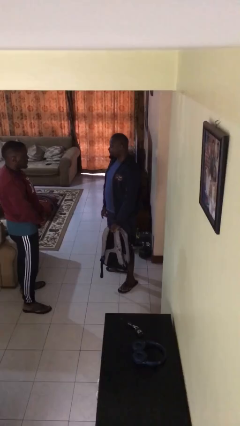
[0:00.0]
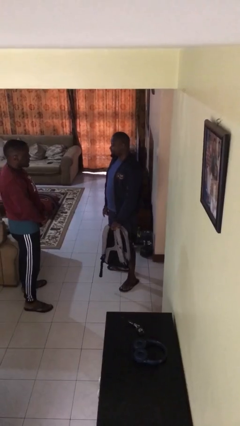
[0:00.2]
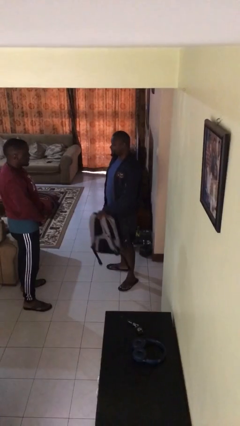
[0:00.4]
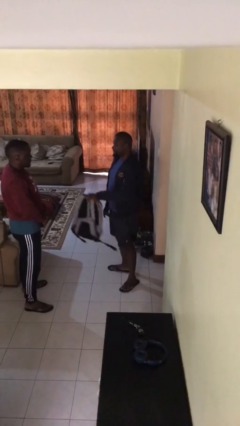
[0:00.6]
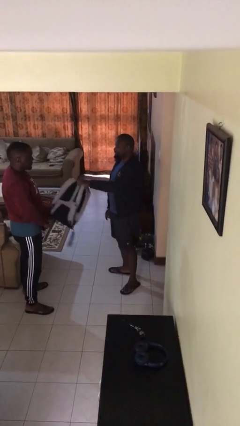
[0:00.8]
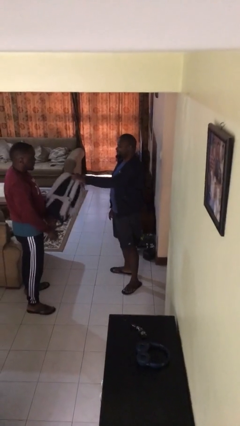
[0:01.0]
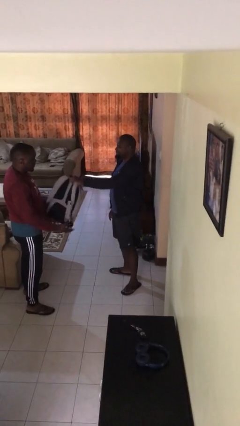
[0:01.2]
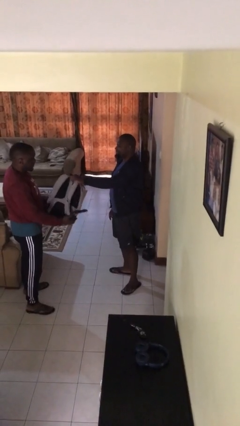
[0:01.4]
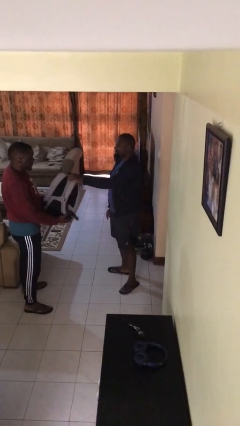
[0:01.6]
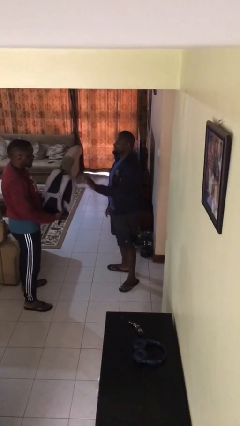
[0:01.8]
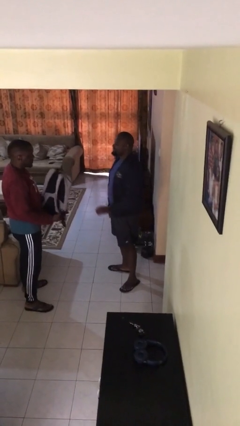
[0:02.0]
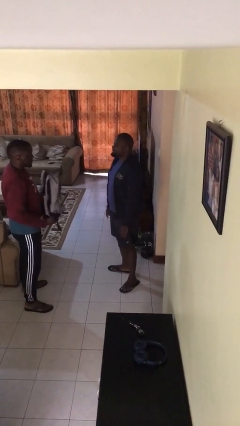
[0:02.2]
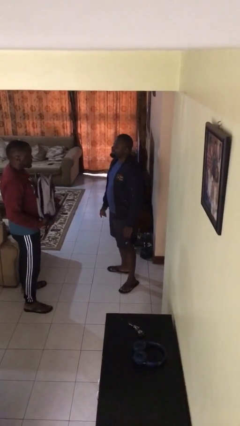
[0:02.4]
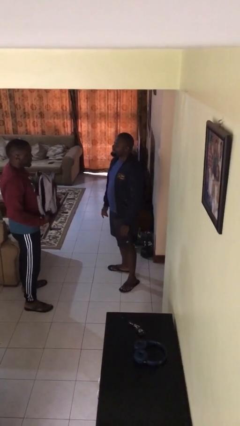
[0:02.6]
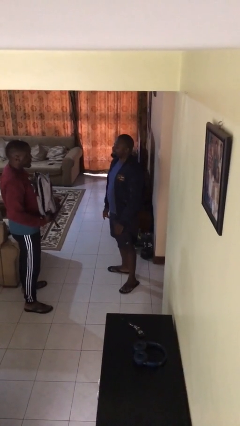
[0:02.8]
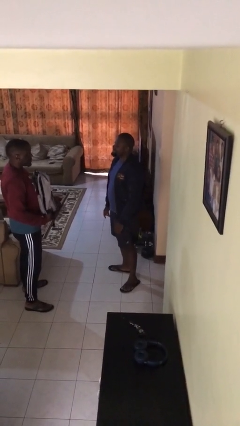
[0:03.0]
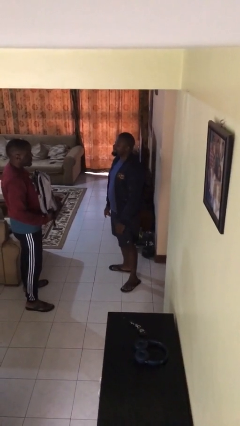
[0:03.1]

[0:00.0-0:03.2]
person transfers object to person

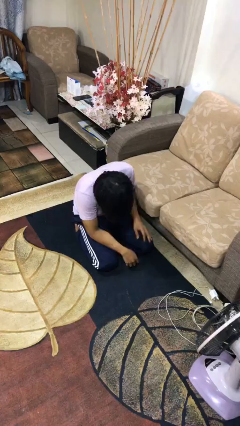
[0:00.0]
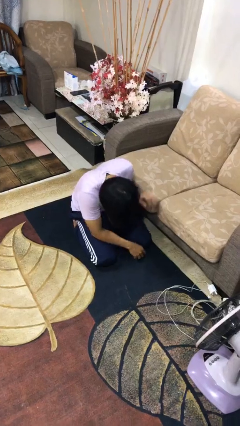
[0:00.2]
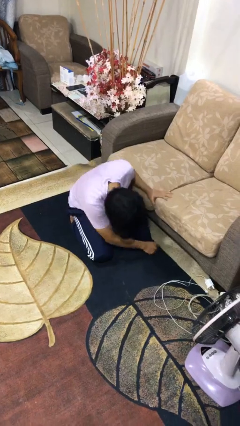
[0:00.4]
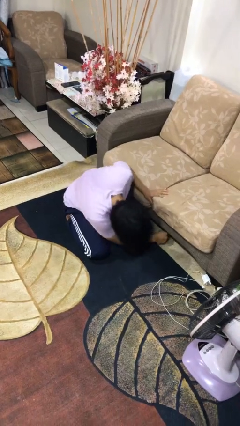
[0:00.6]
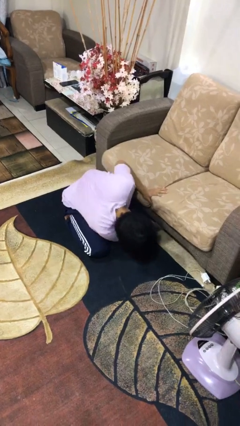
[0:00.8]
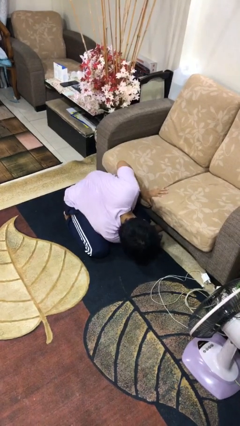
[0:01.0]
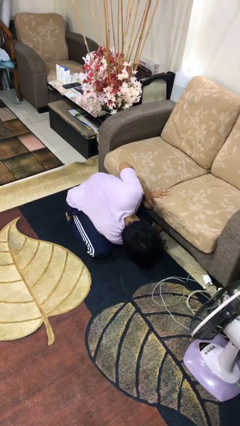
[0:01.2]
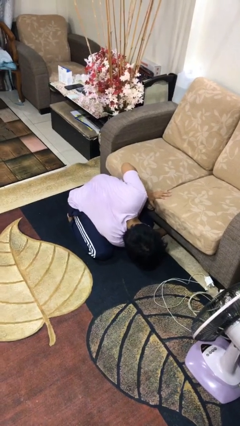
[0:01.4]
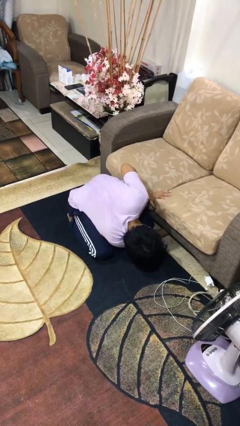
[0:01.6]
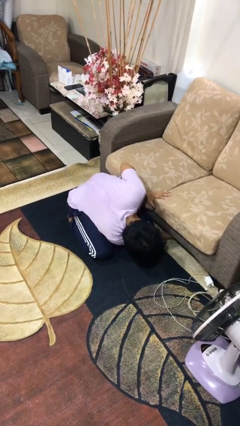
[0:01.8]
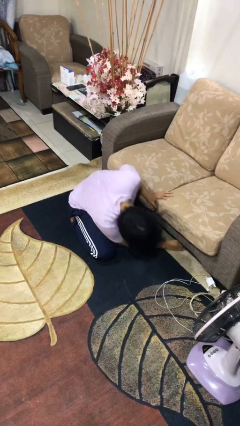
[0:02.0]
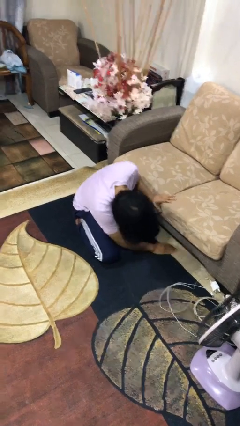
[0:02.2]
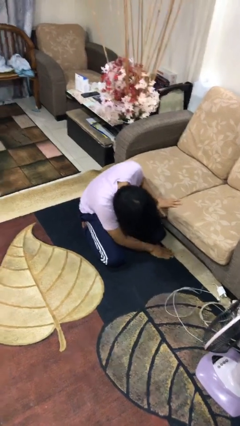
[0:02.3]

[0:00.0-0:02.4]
person searches under couch

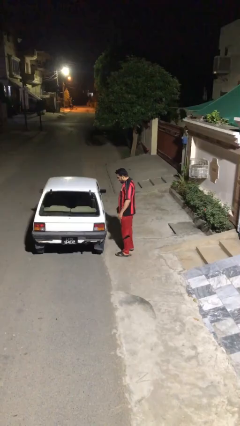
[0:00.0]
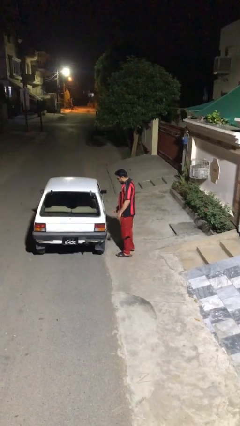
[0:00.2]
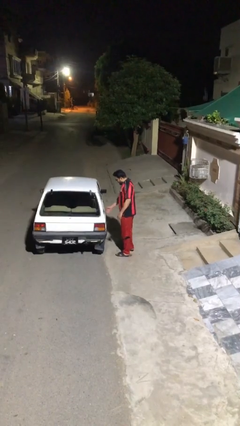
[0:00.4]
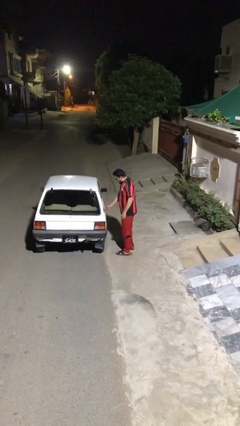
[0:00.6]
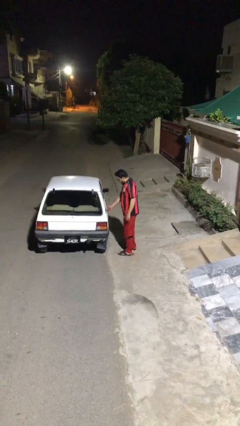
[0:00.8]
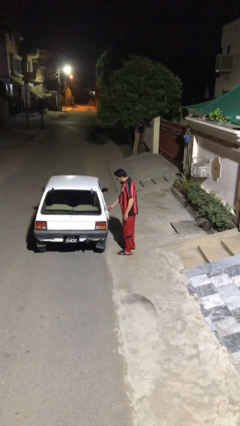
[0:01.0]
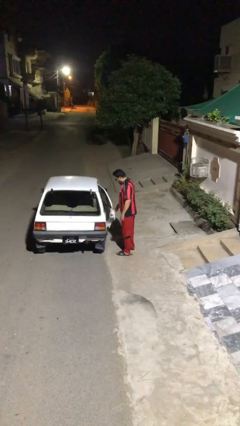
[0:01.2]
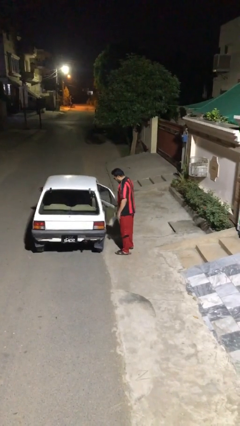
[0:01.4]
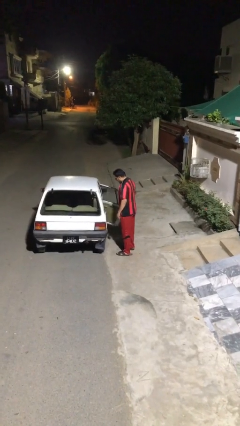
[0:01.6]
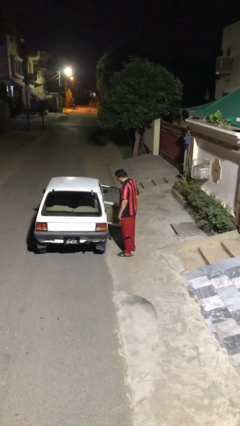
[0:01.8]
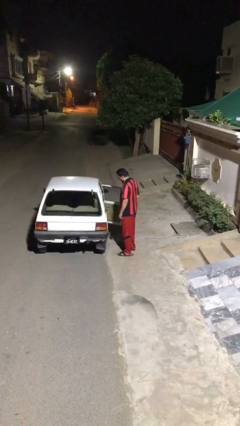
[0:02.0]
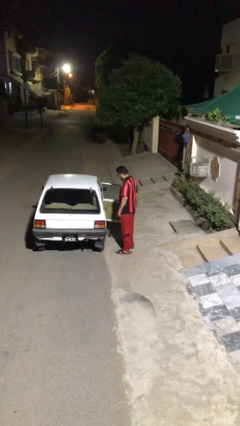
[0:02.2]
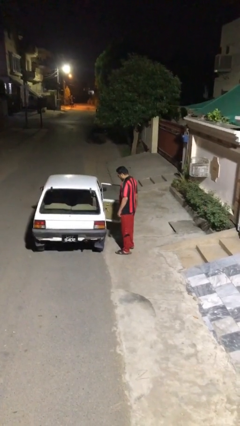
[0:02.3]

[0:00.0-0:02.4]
person opens car door

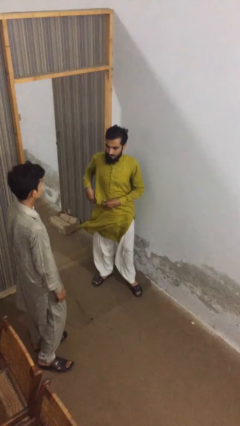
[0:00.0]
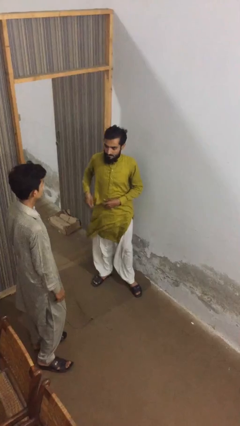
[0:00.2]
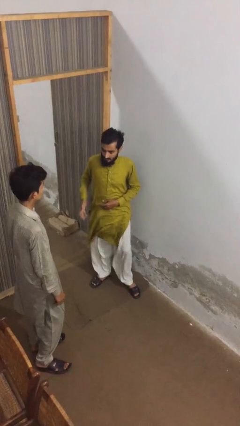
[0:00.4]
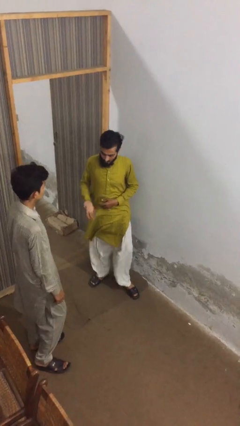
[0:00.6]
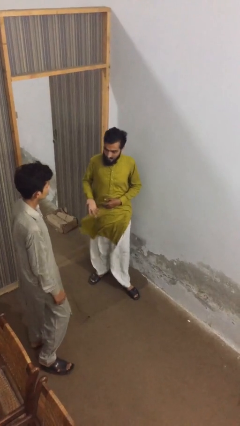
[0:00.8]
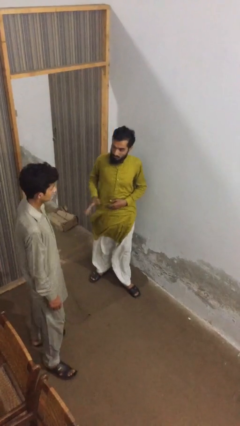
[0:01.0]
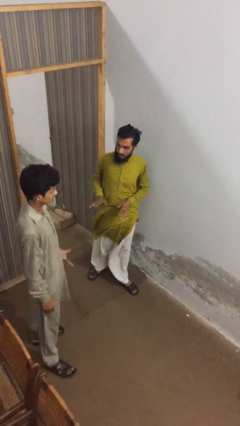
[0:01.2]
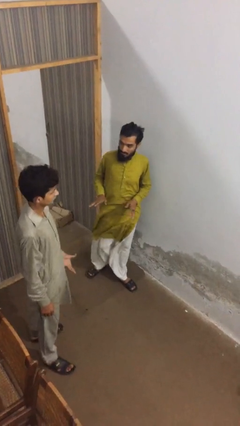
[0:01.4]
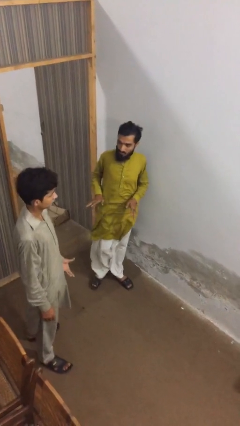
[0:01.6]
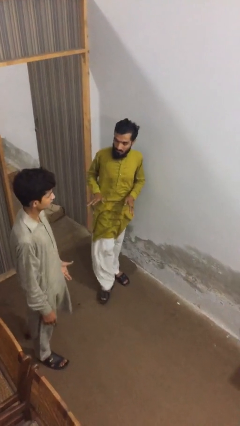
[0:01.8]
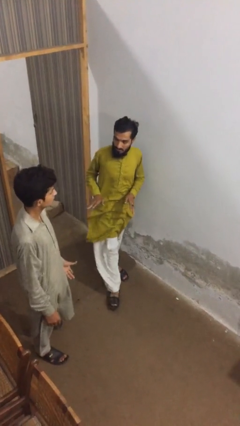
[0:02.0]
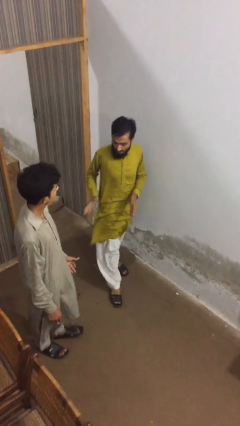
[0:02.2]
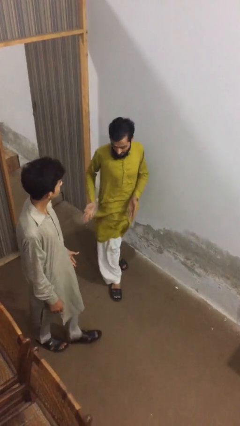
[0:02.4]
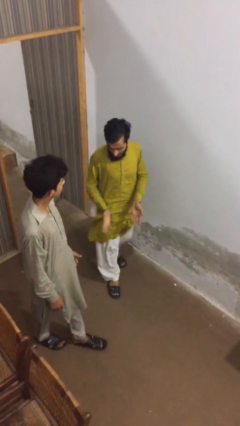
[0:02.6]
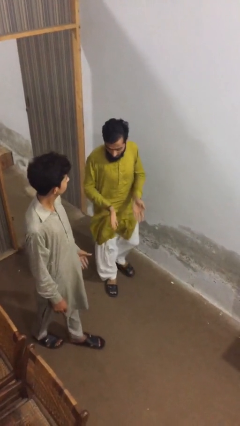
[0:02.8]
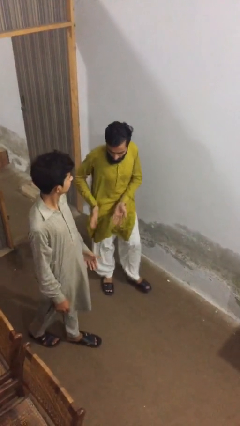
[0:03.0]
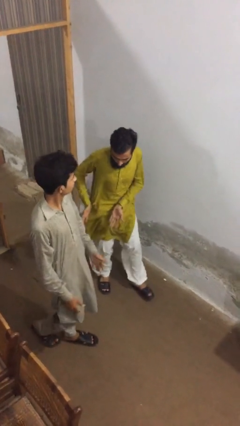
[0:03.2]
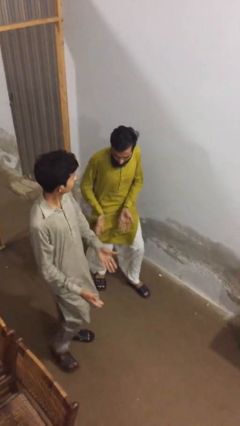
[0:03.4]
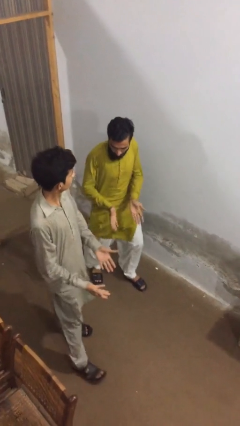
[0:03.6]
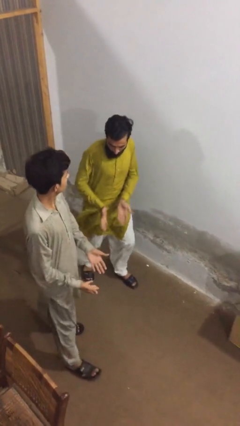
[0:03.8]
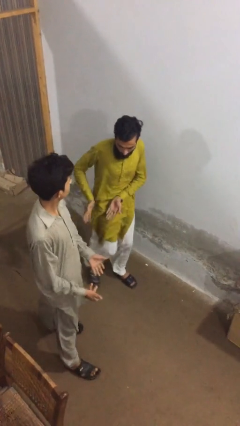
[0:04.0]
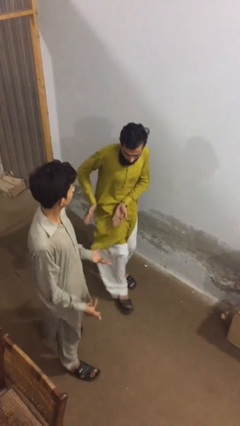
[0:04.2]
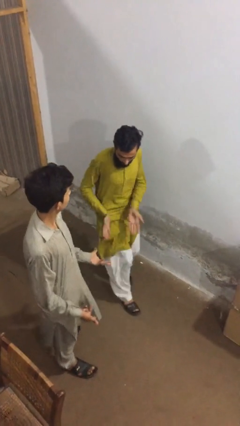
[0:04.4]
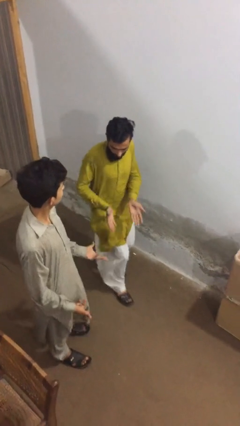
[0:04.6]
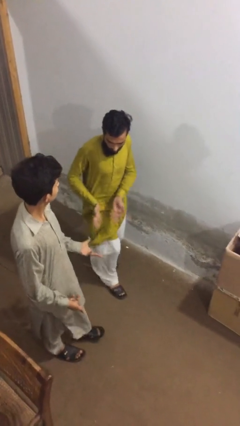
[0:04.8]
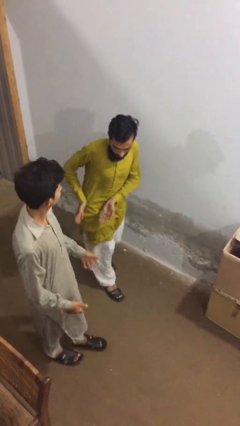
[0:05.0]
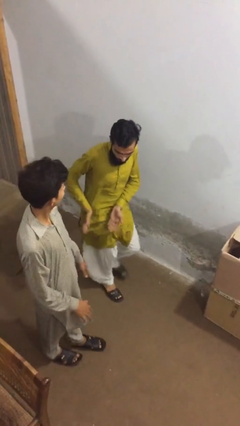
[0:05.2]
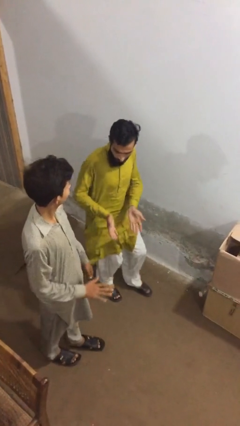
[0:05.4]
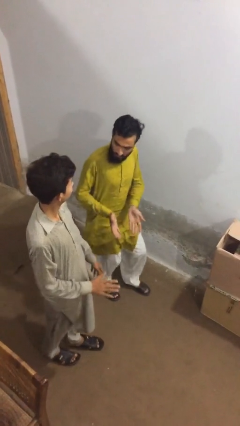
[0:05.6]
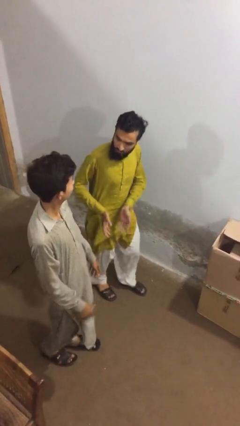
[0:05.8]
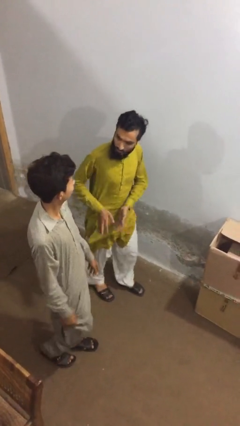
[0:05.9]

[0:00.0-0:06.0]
person talks to person

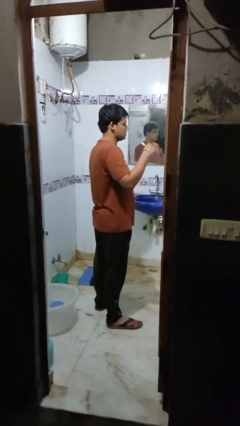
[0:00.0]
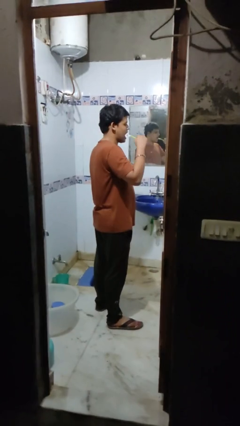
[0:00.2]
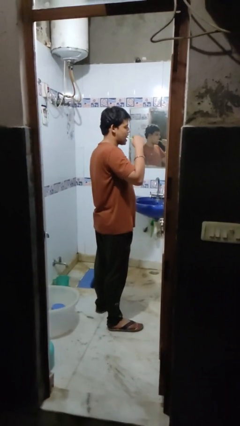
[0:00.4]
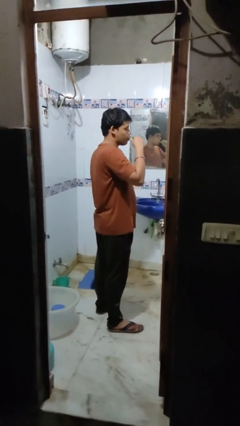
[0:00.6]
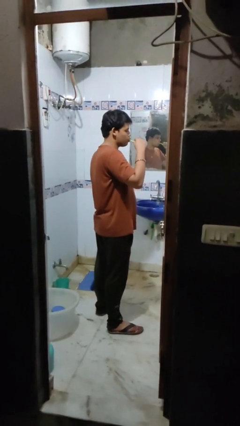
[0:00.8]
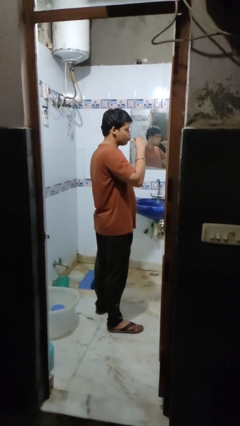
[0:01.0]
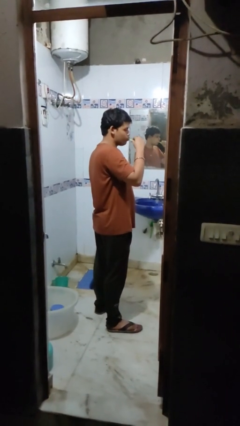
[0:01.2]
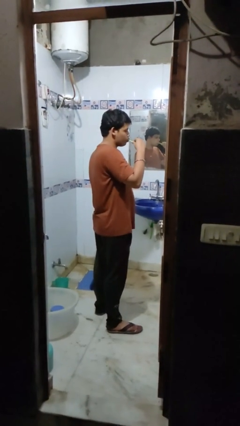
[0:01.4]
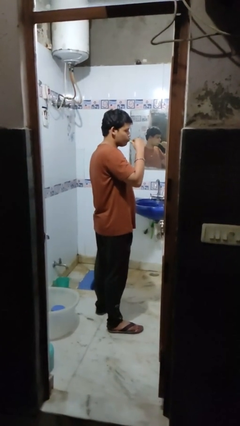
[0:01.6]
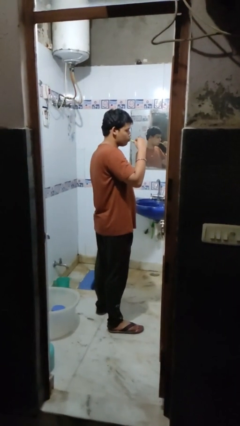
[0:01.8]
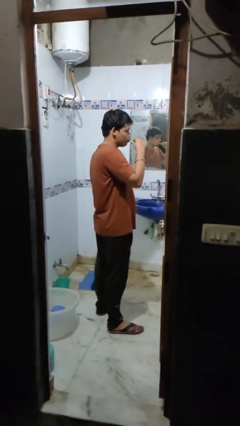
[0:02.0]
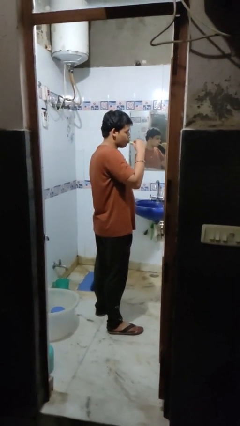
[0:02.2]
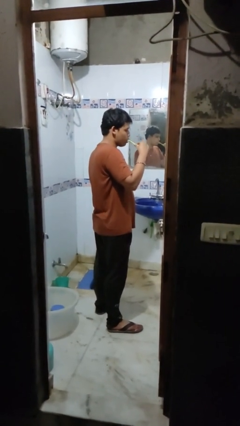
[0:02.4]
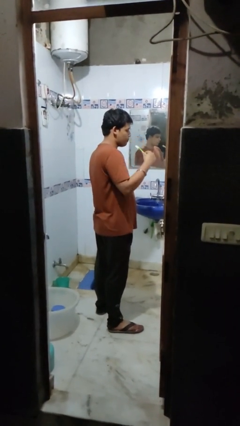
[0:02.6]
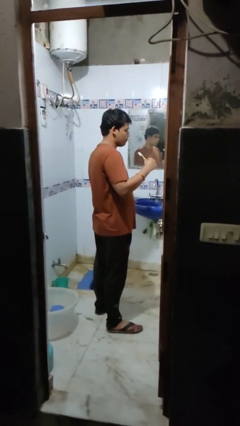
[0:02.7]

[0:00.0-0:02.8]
person brushes teeth

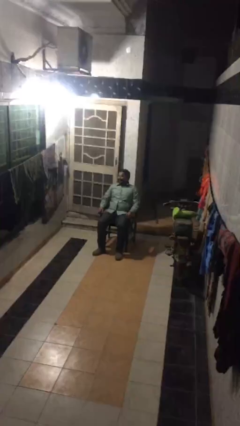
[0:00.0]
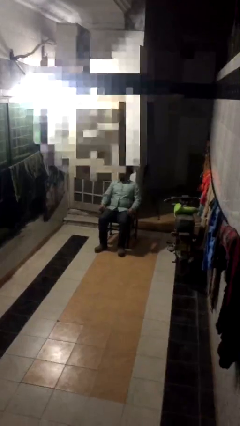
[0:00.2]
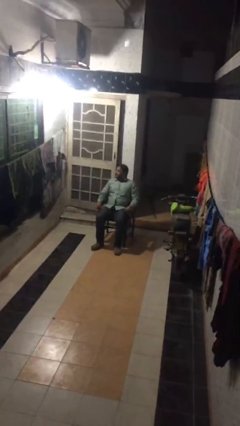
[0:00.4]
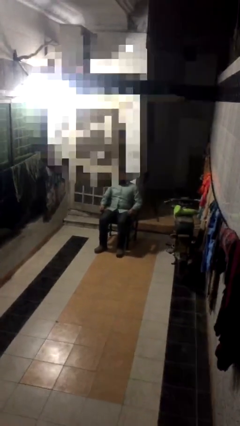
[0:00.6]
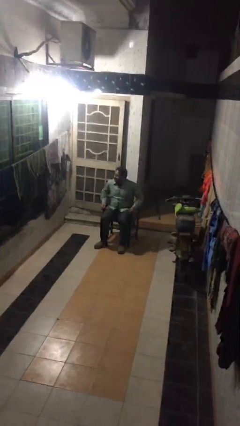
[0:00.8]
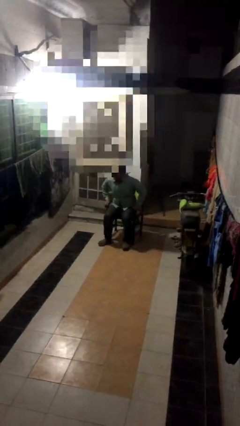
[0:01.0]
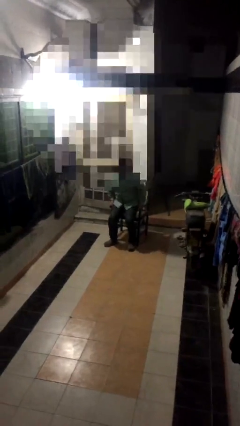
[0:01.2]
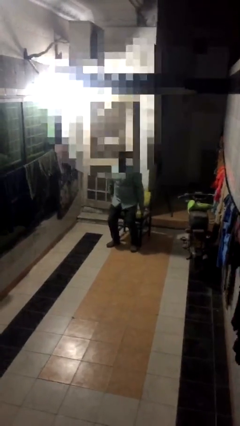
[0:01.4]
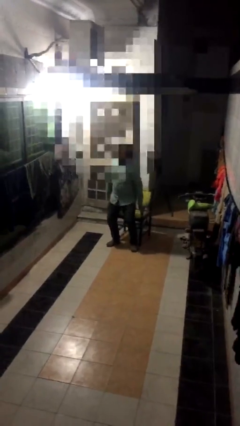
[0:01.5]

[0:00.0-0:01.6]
person stands up
